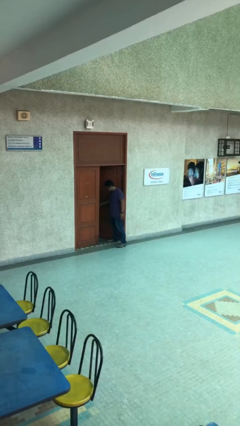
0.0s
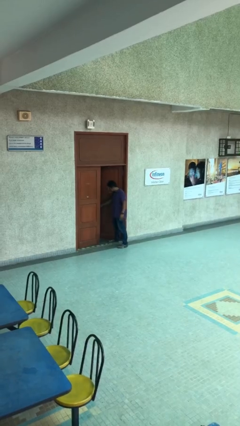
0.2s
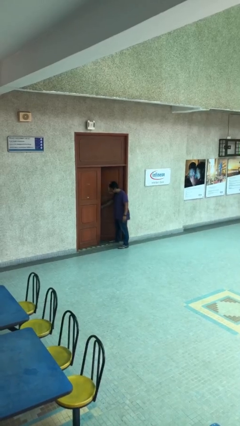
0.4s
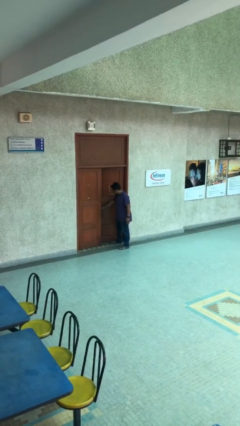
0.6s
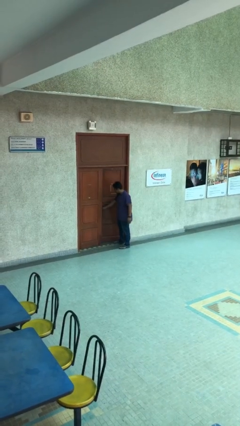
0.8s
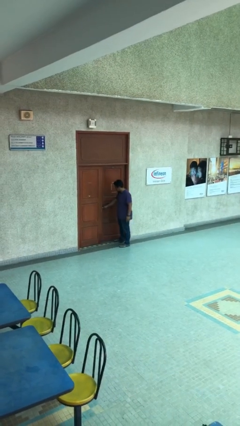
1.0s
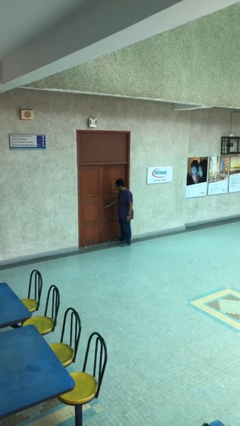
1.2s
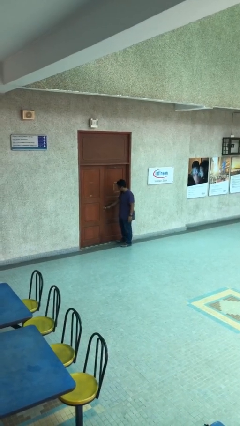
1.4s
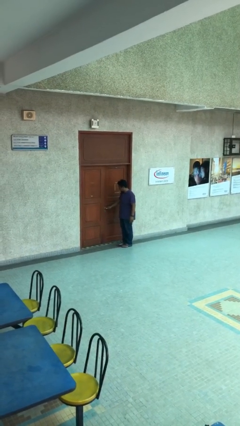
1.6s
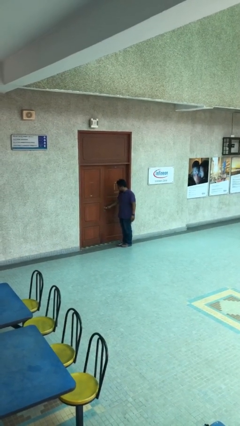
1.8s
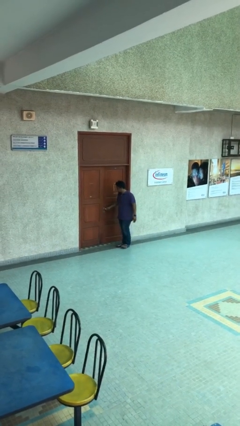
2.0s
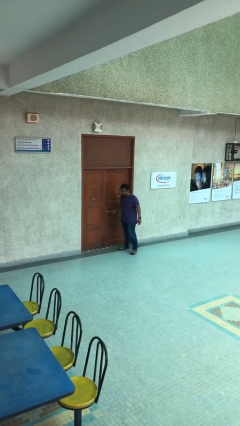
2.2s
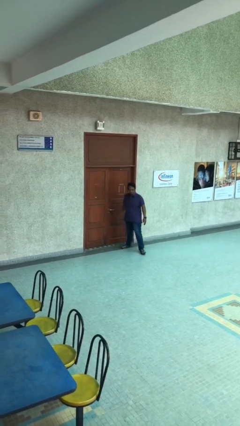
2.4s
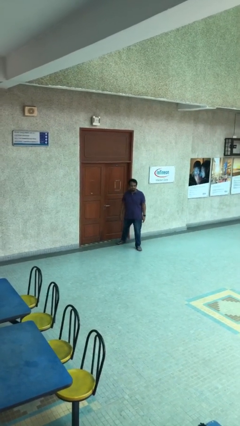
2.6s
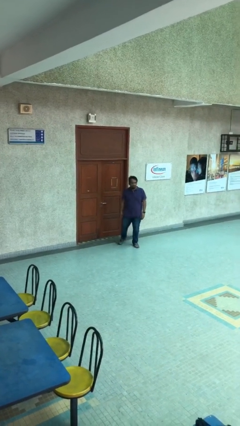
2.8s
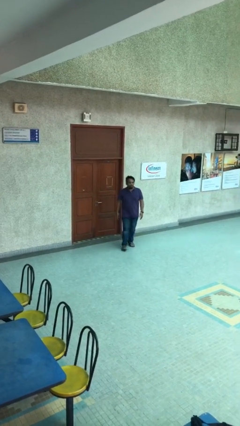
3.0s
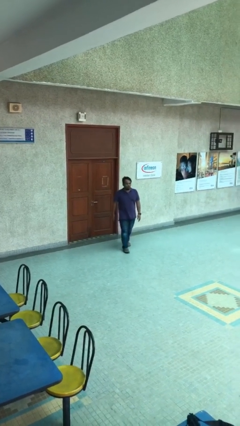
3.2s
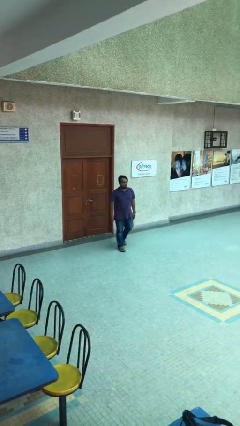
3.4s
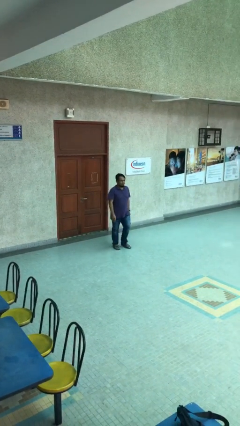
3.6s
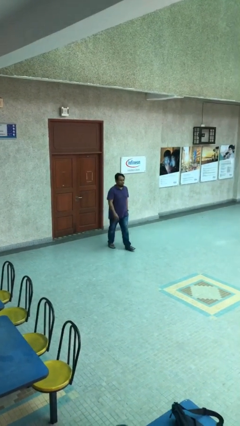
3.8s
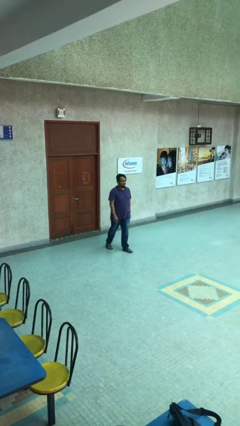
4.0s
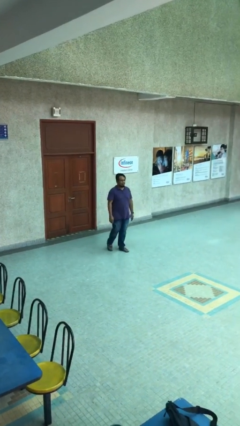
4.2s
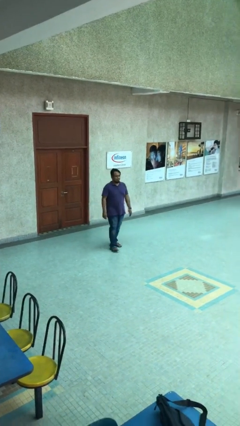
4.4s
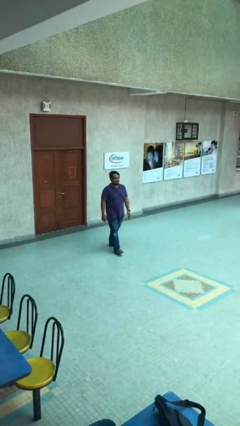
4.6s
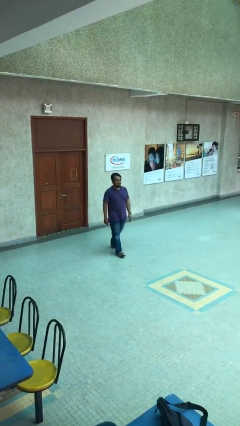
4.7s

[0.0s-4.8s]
person closes facility door

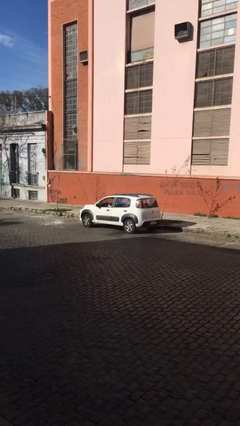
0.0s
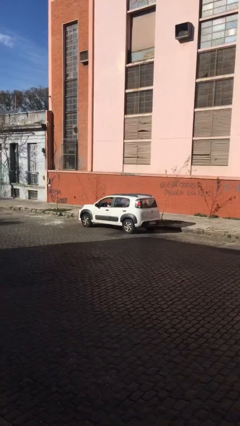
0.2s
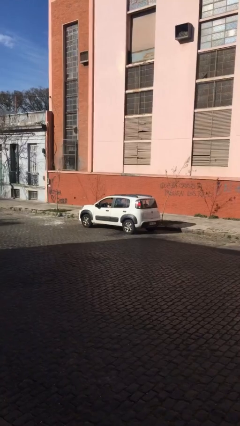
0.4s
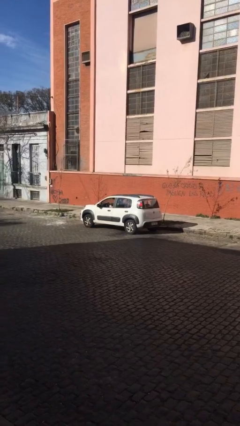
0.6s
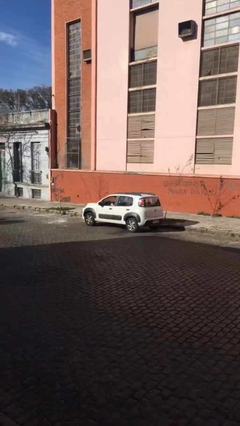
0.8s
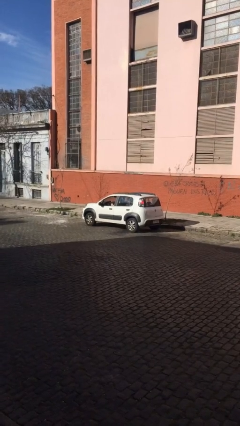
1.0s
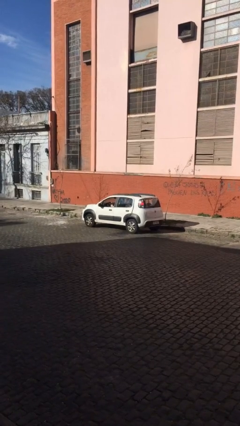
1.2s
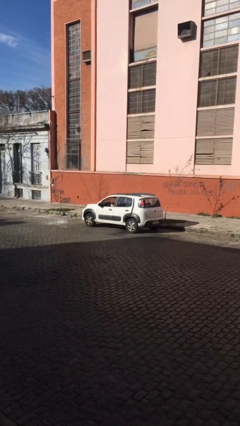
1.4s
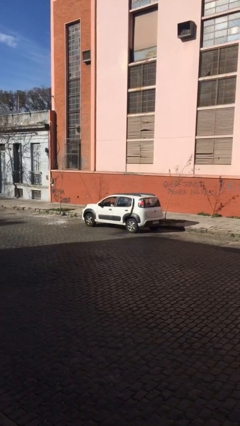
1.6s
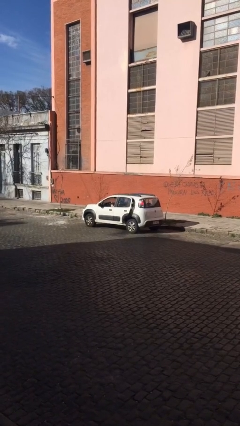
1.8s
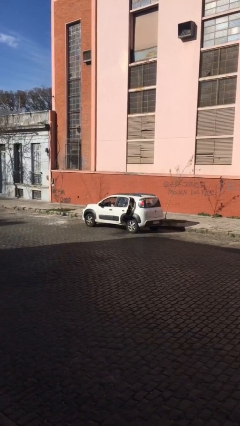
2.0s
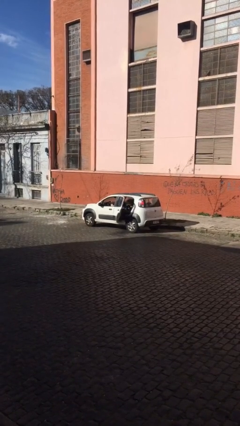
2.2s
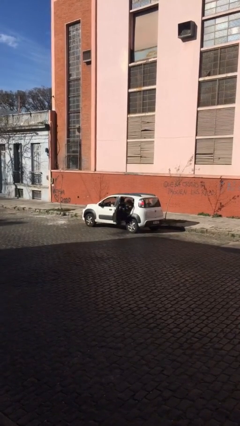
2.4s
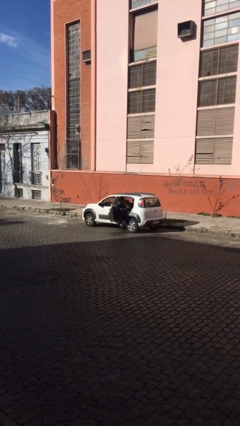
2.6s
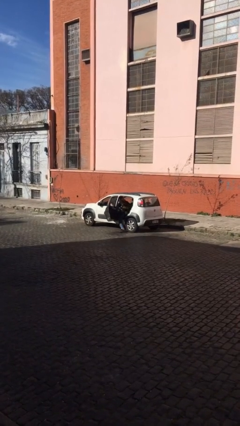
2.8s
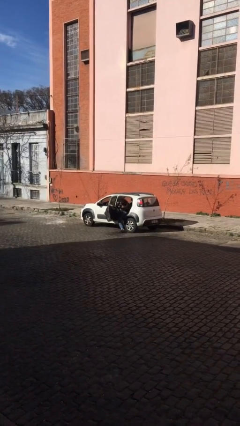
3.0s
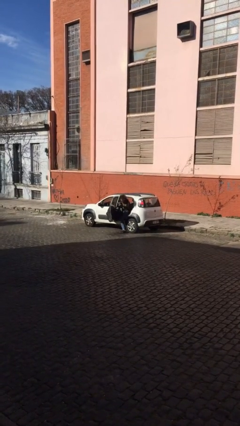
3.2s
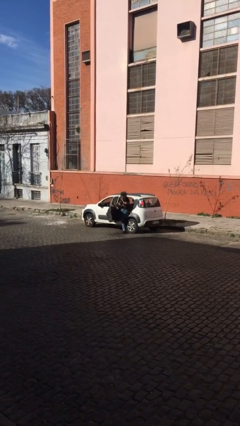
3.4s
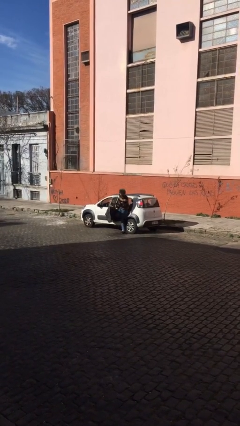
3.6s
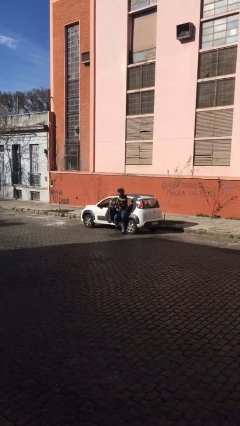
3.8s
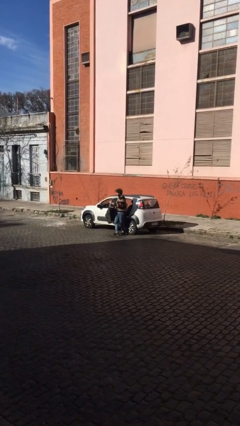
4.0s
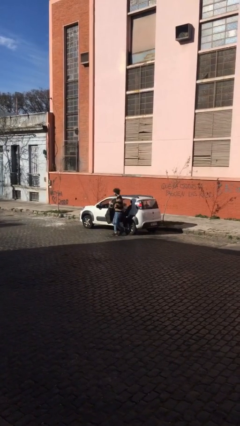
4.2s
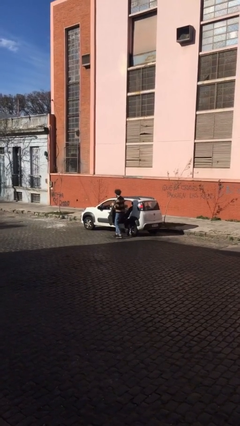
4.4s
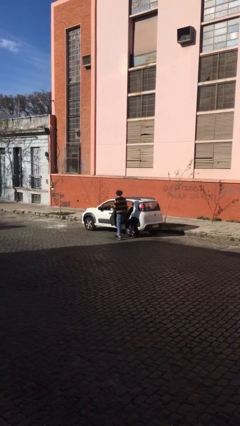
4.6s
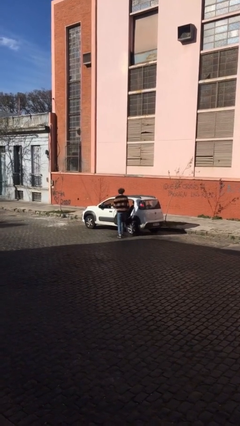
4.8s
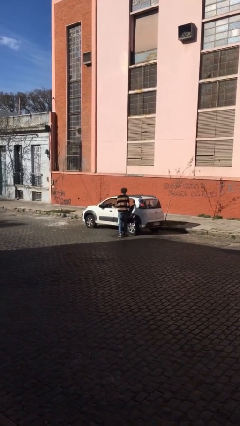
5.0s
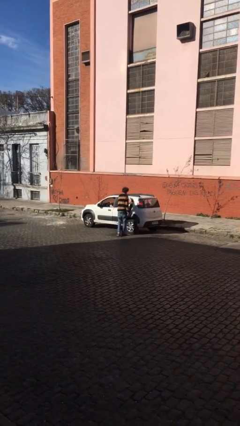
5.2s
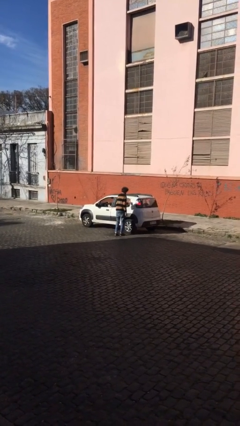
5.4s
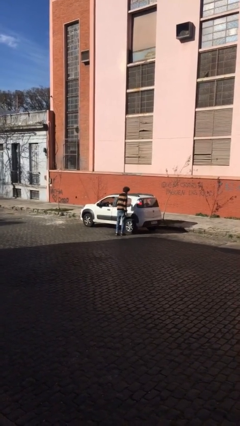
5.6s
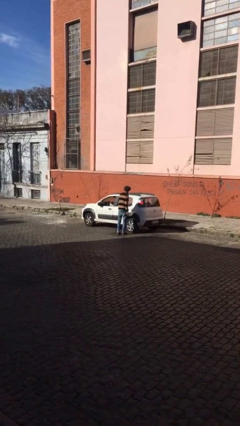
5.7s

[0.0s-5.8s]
car drops off person

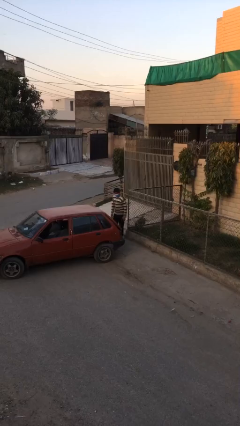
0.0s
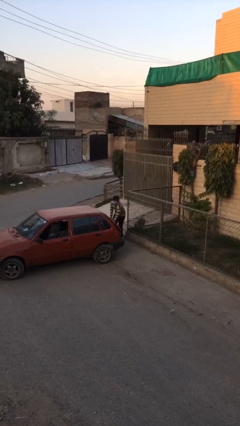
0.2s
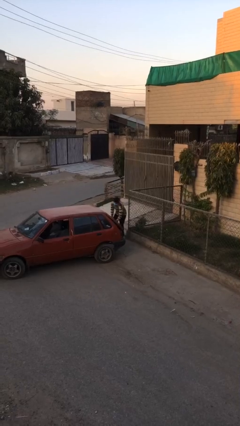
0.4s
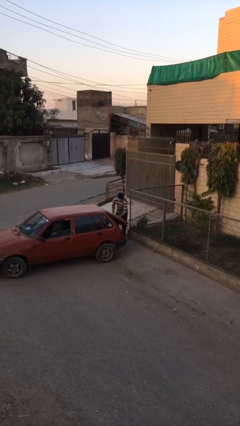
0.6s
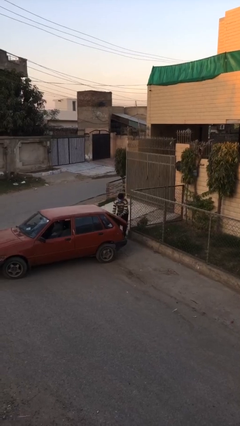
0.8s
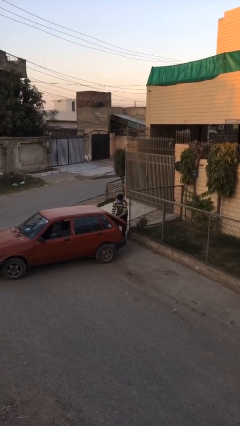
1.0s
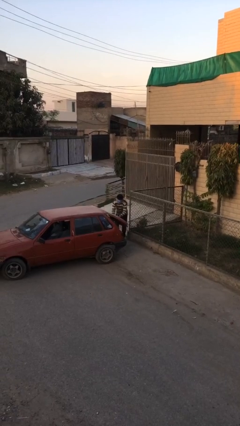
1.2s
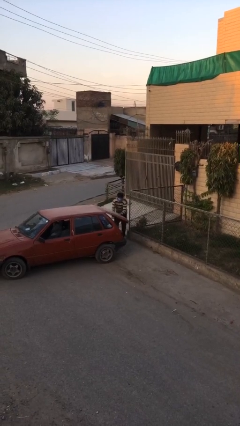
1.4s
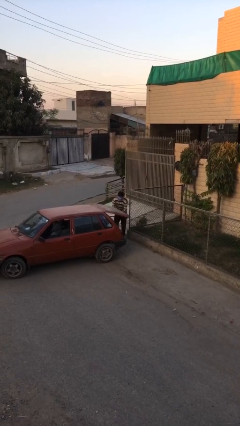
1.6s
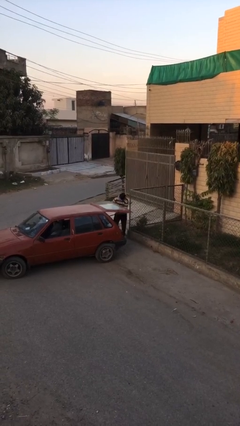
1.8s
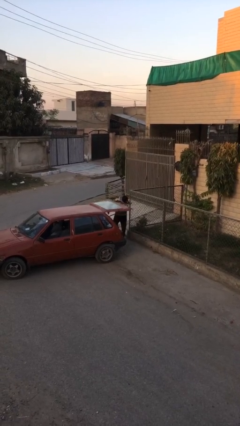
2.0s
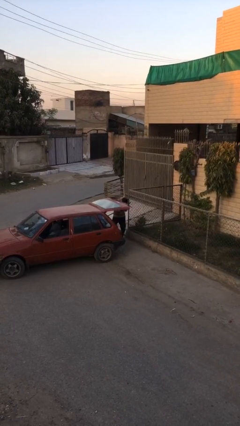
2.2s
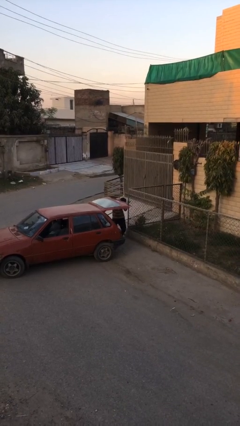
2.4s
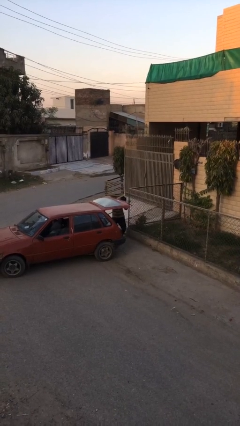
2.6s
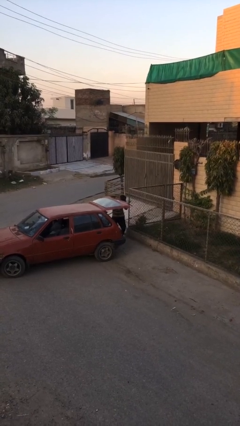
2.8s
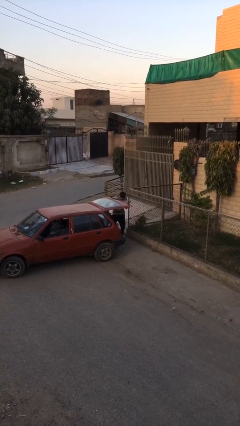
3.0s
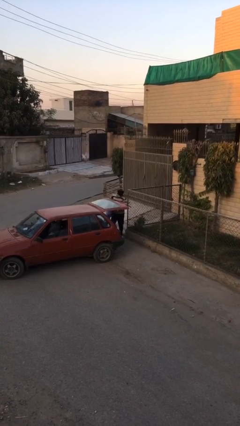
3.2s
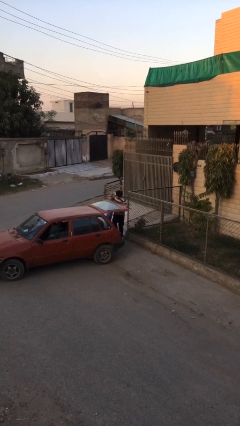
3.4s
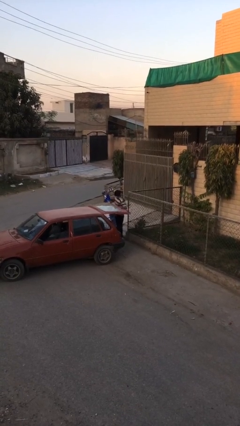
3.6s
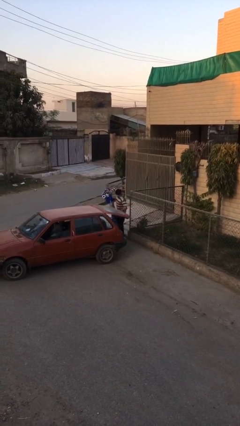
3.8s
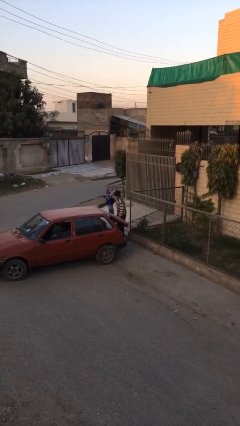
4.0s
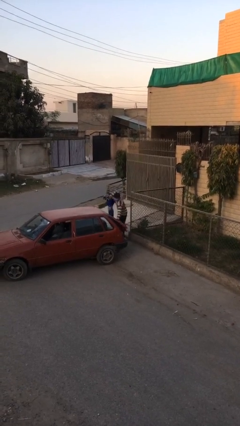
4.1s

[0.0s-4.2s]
person unloads car

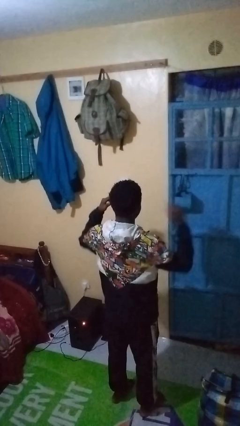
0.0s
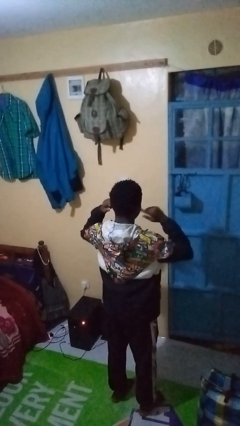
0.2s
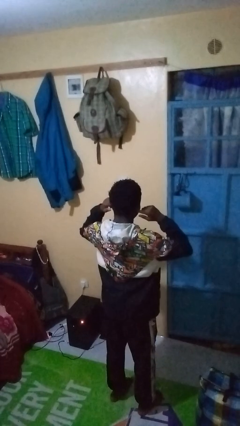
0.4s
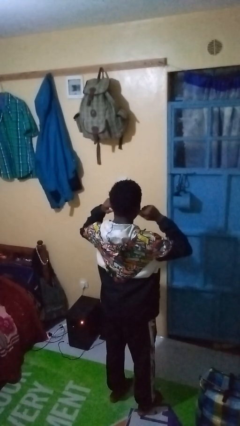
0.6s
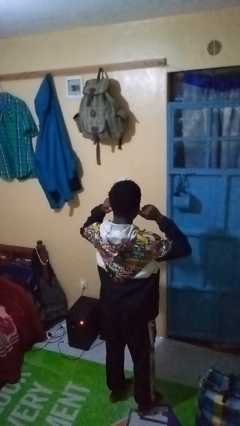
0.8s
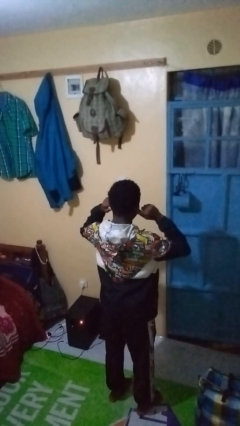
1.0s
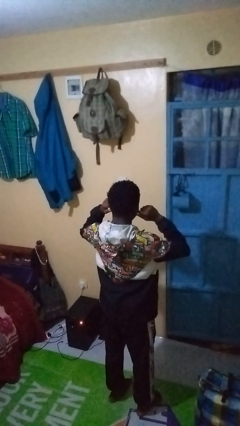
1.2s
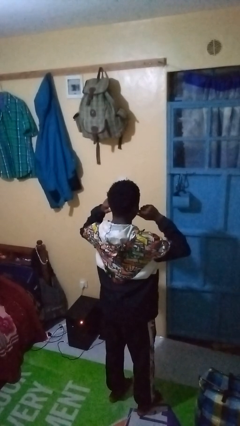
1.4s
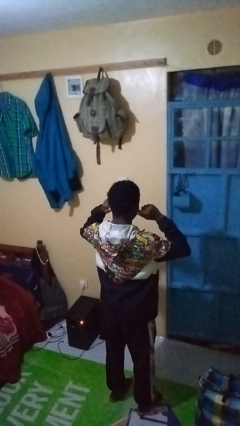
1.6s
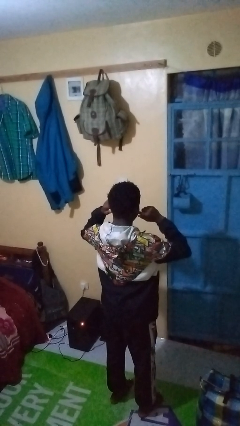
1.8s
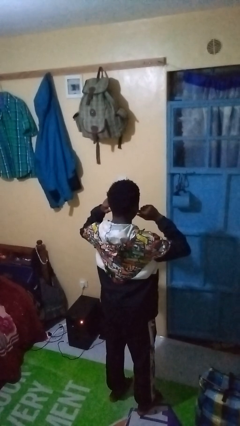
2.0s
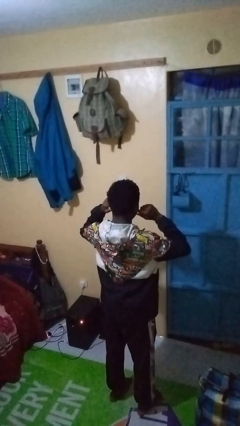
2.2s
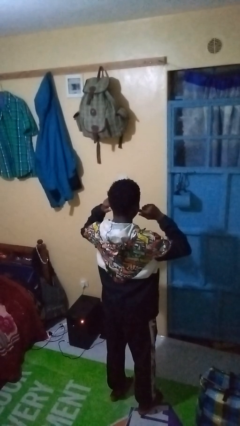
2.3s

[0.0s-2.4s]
person puts fingers in ear

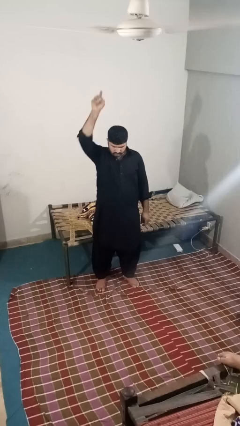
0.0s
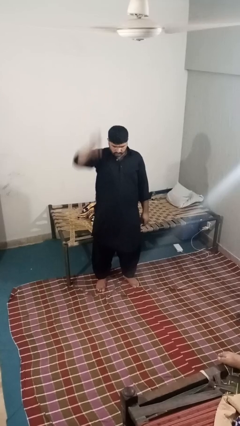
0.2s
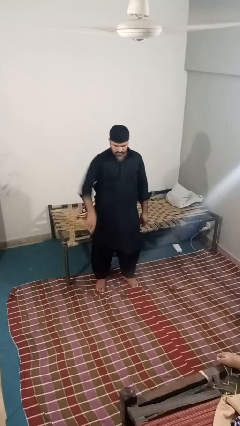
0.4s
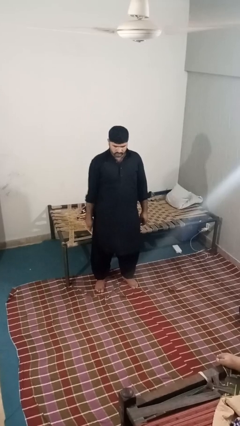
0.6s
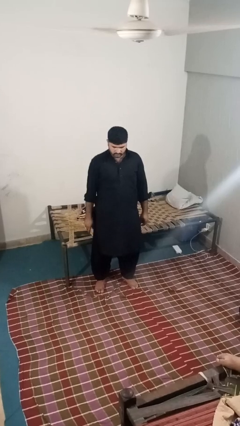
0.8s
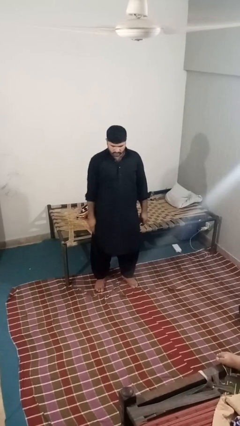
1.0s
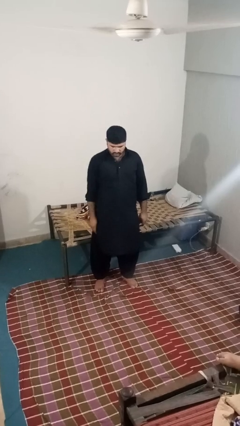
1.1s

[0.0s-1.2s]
person gestures swipe down
